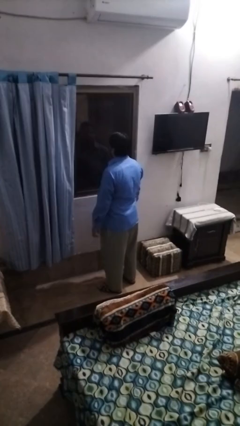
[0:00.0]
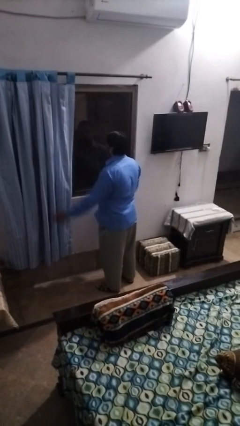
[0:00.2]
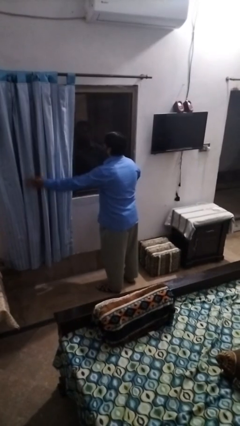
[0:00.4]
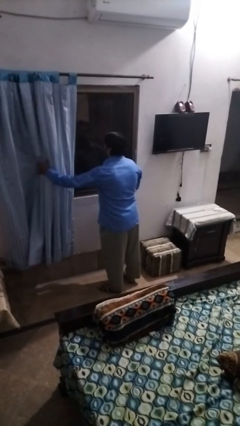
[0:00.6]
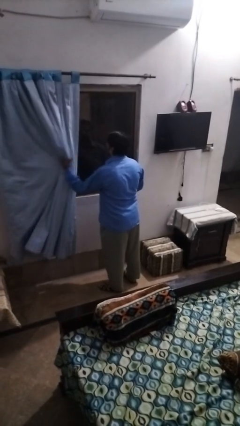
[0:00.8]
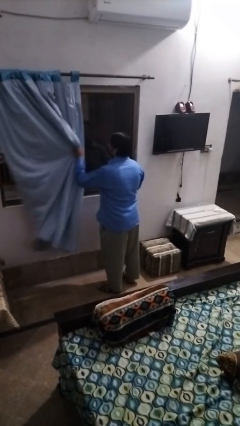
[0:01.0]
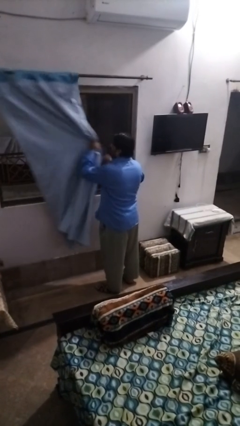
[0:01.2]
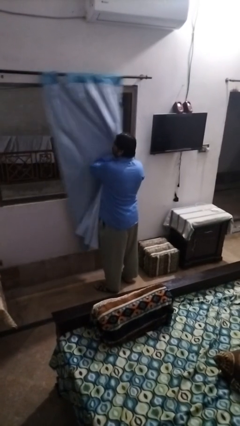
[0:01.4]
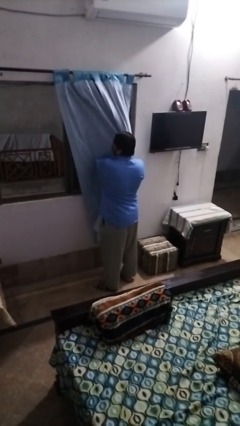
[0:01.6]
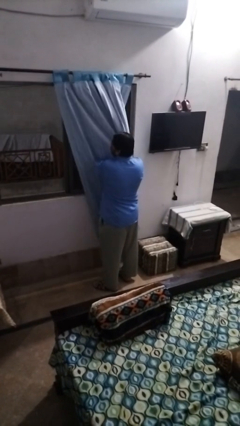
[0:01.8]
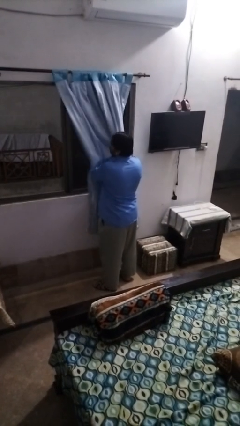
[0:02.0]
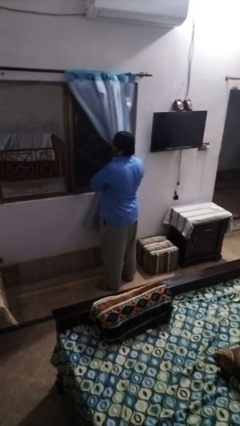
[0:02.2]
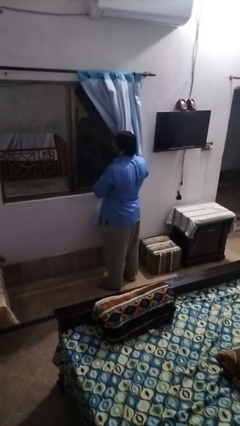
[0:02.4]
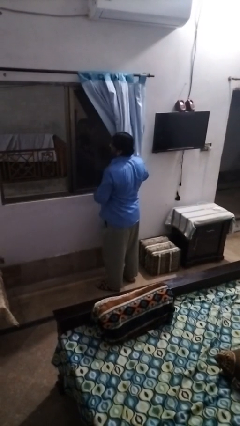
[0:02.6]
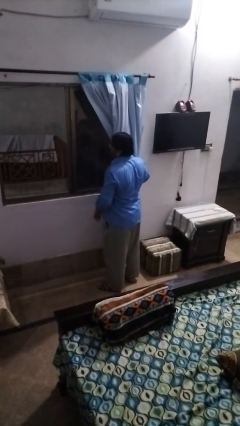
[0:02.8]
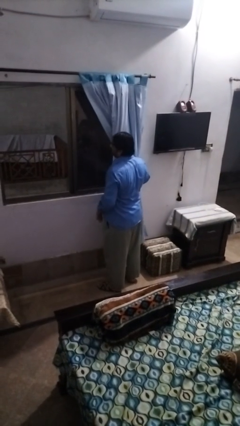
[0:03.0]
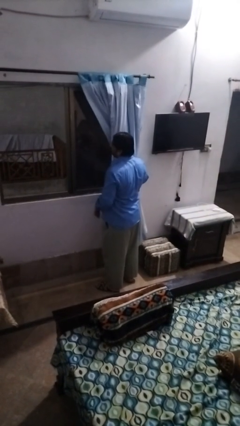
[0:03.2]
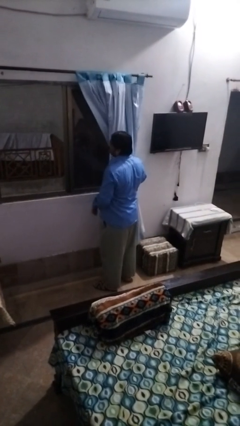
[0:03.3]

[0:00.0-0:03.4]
person opens curtains

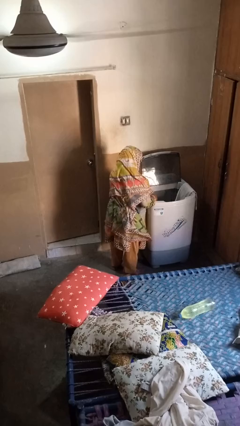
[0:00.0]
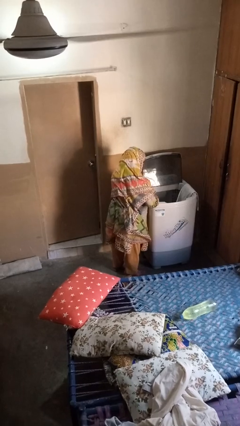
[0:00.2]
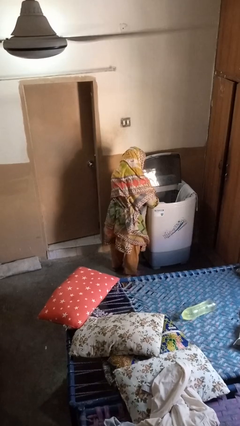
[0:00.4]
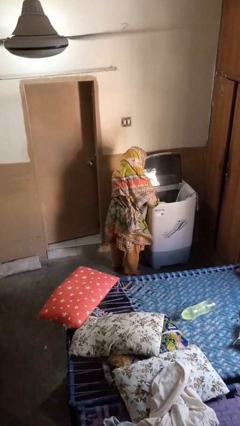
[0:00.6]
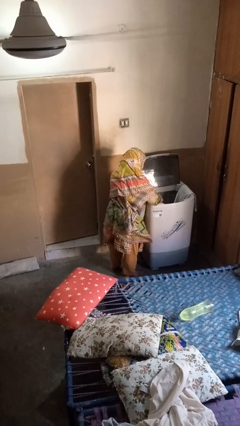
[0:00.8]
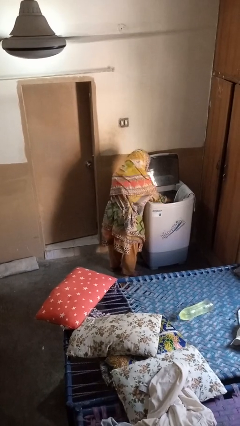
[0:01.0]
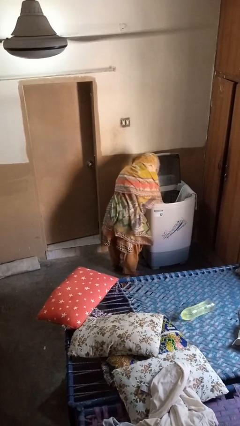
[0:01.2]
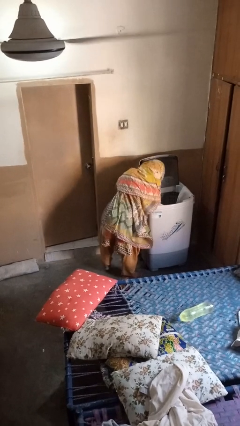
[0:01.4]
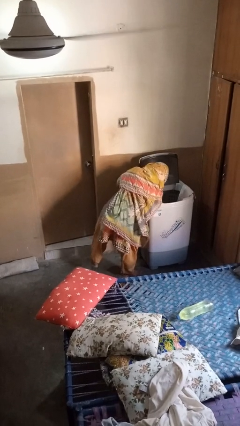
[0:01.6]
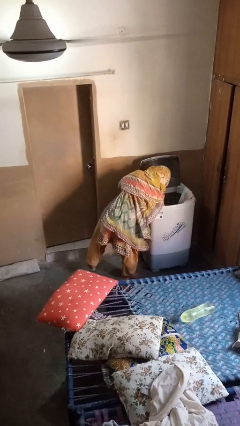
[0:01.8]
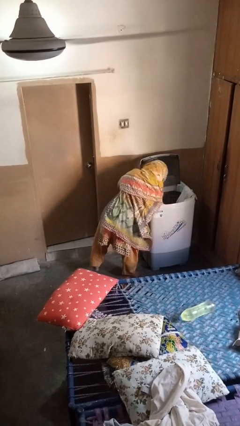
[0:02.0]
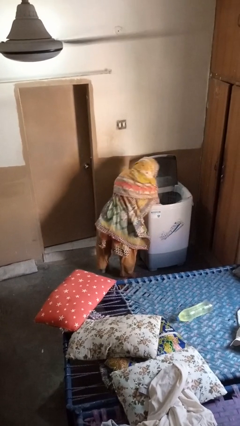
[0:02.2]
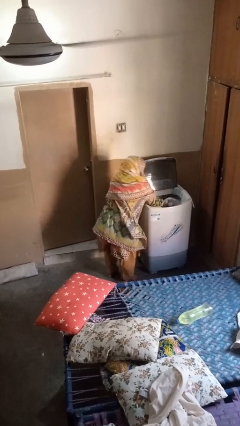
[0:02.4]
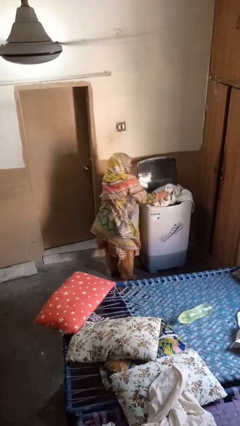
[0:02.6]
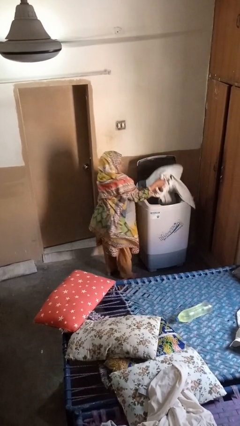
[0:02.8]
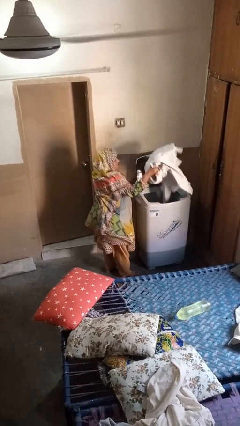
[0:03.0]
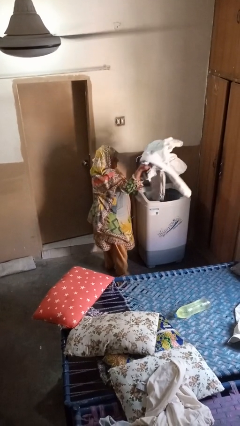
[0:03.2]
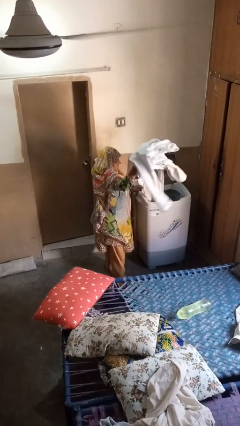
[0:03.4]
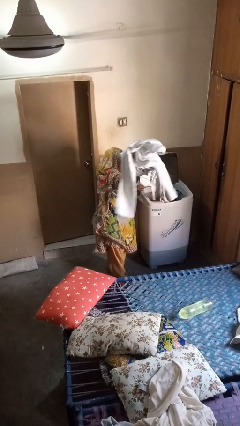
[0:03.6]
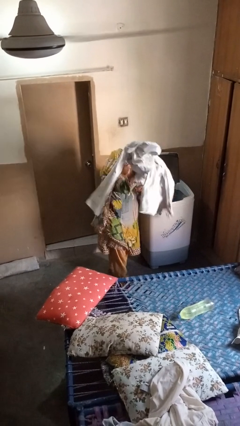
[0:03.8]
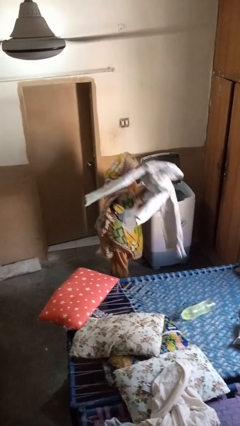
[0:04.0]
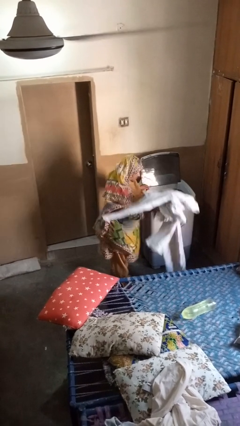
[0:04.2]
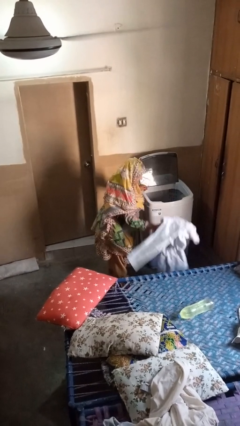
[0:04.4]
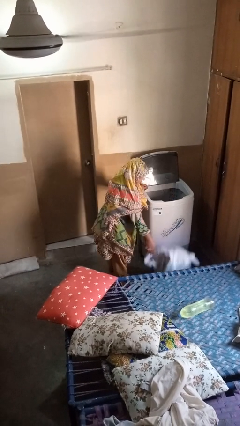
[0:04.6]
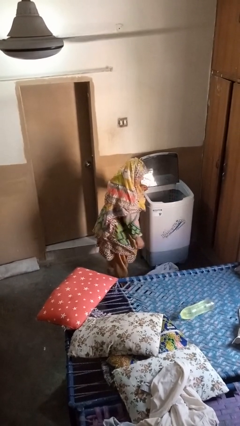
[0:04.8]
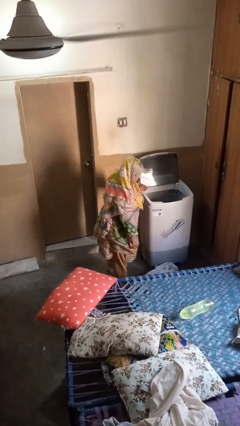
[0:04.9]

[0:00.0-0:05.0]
person unloads clotheswasher

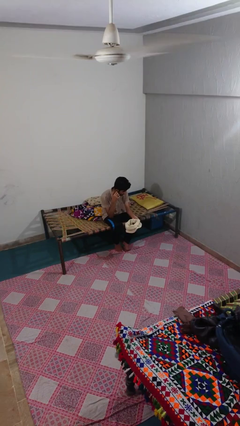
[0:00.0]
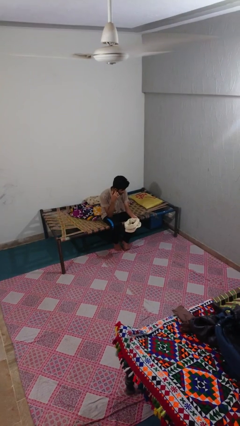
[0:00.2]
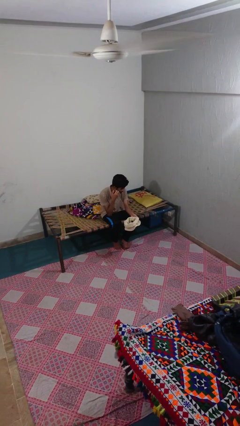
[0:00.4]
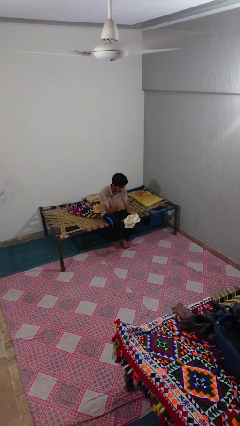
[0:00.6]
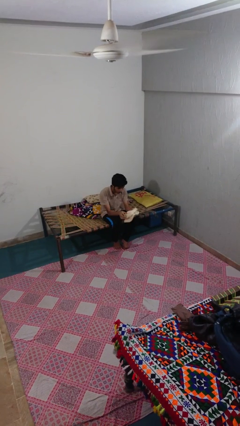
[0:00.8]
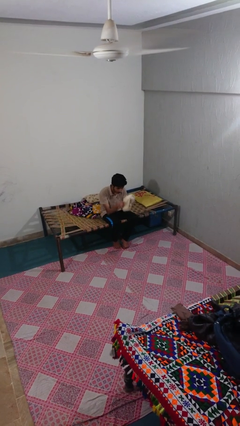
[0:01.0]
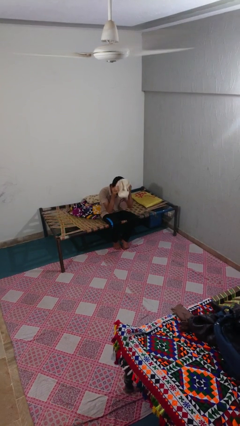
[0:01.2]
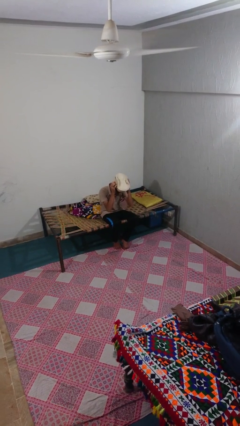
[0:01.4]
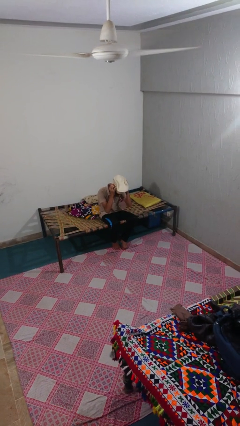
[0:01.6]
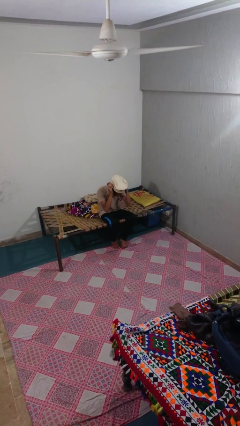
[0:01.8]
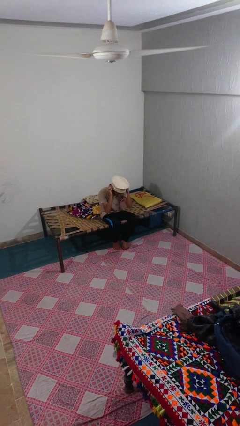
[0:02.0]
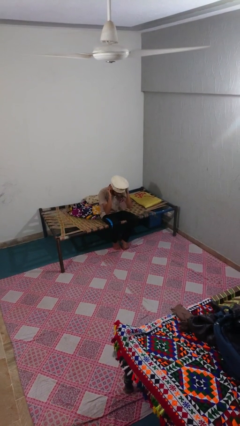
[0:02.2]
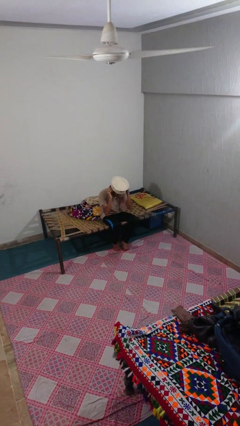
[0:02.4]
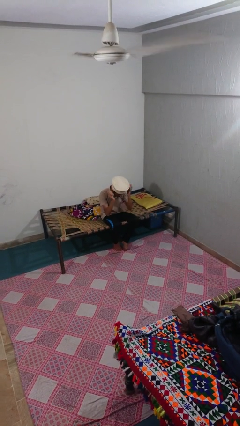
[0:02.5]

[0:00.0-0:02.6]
person puts on hat

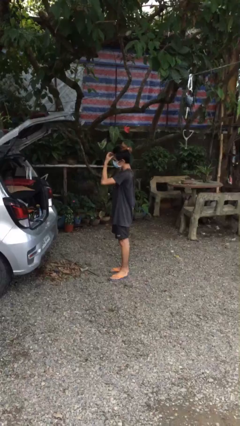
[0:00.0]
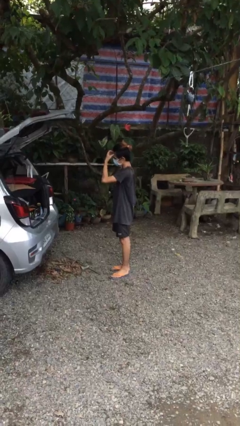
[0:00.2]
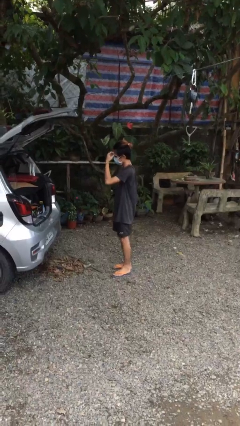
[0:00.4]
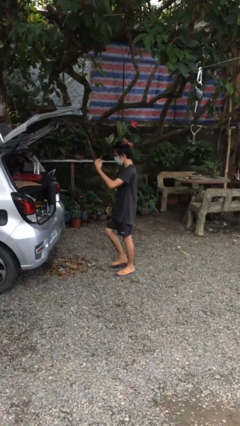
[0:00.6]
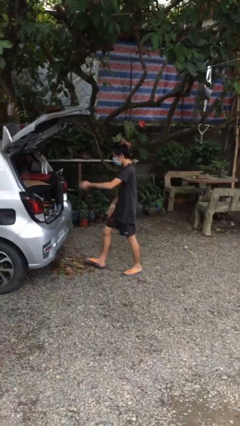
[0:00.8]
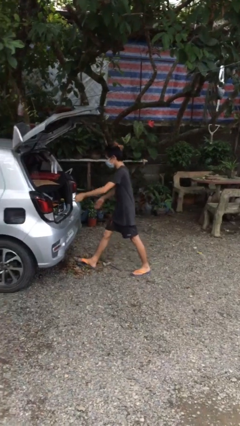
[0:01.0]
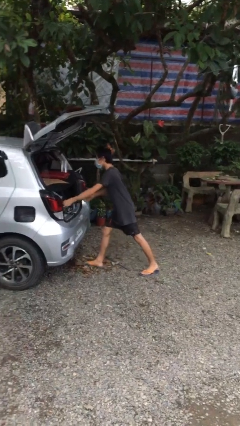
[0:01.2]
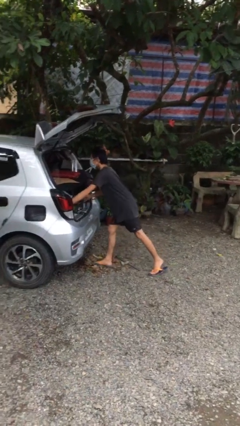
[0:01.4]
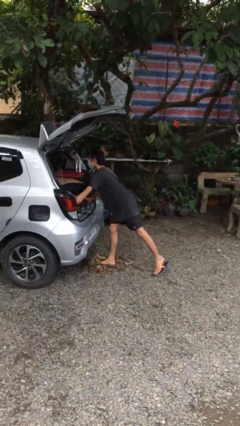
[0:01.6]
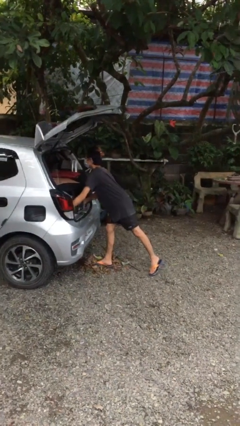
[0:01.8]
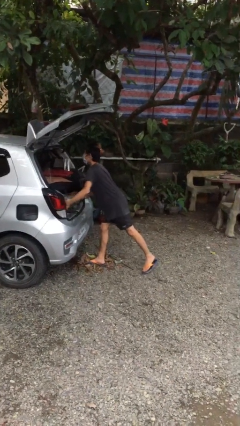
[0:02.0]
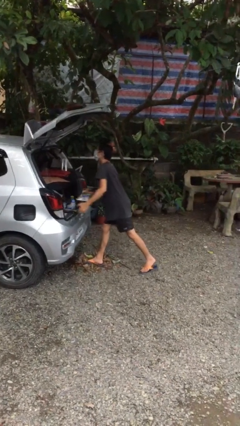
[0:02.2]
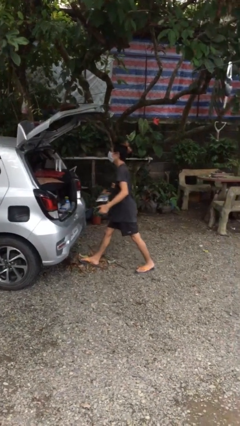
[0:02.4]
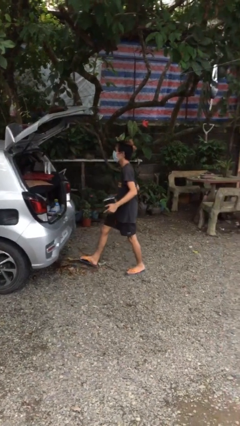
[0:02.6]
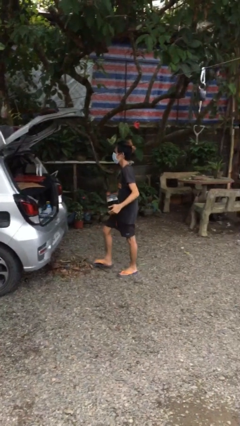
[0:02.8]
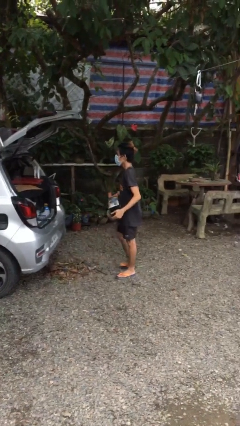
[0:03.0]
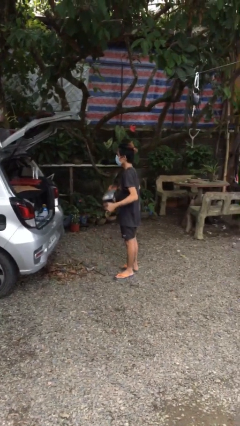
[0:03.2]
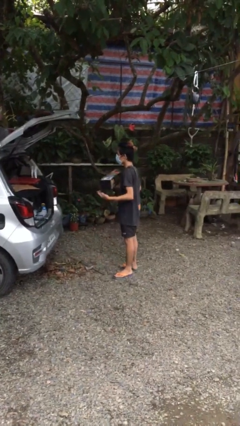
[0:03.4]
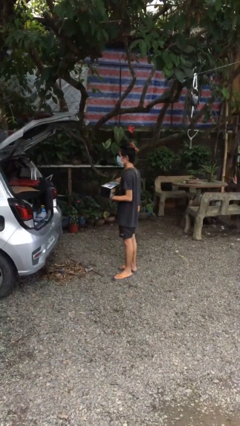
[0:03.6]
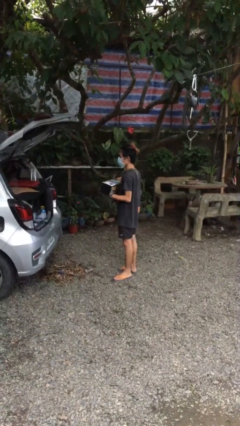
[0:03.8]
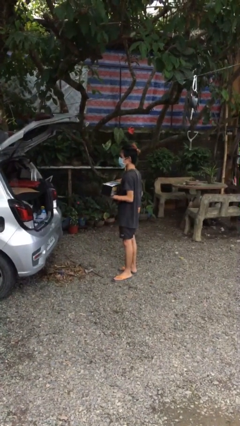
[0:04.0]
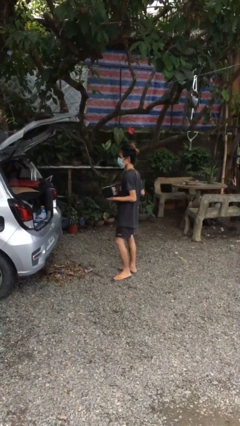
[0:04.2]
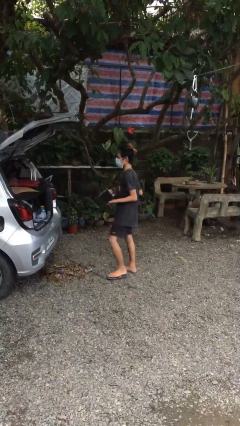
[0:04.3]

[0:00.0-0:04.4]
person unloads car

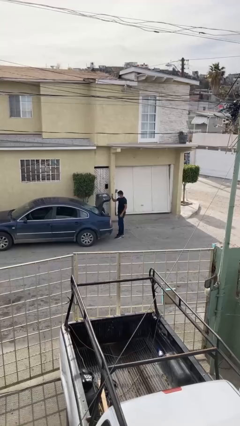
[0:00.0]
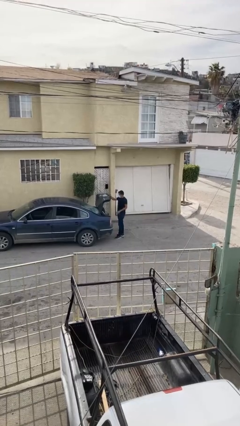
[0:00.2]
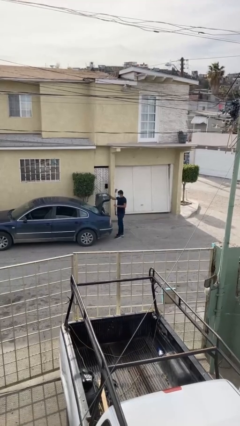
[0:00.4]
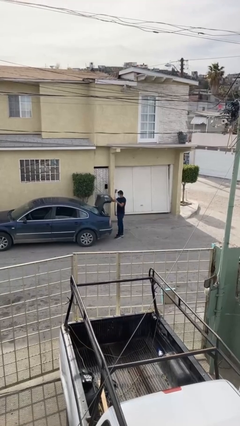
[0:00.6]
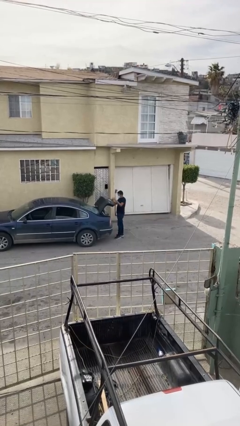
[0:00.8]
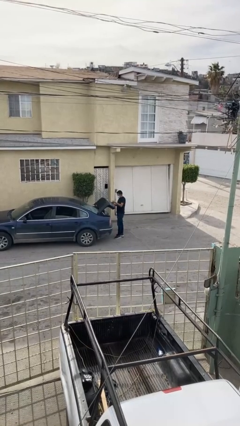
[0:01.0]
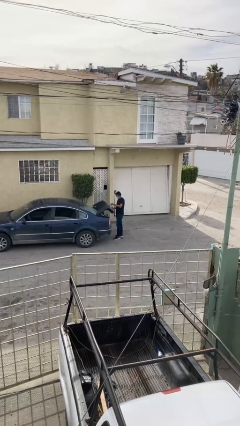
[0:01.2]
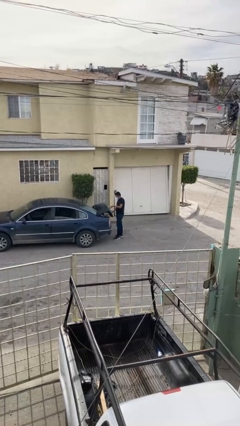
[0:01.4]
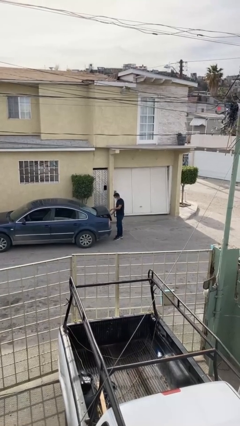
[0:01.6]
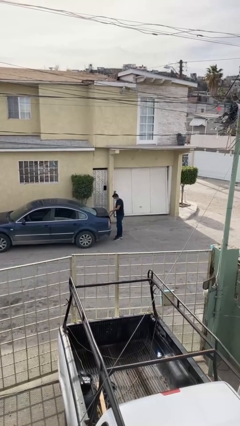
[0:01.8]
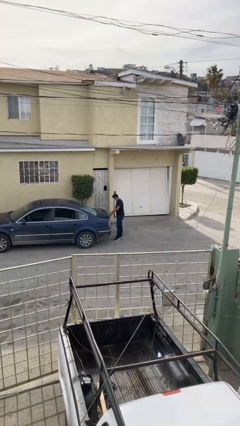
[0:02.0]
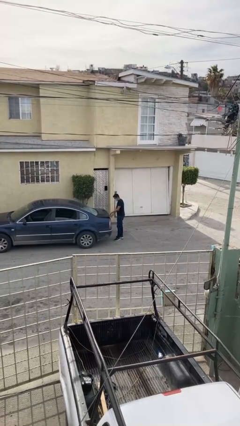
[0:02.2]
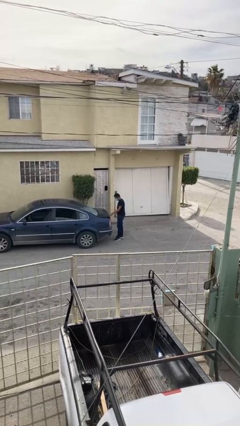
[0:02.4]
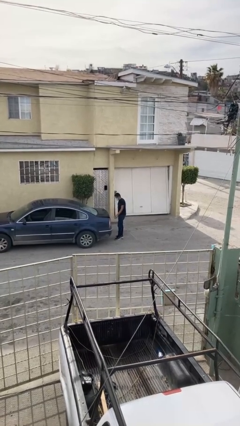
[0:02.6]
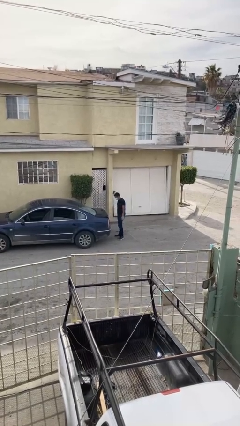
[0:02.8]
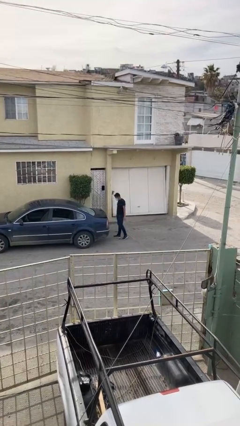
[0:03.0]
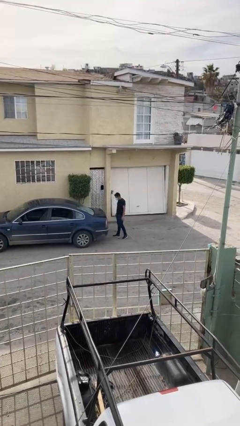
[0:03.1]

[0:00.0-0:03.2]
person closes car trunk
